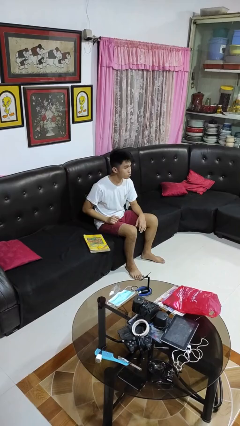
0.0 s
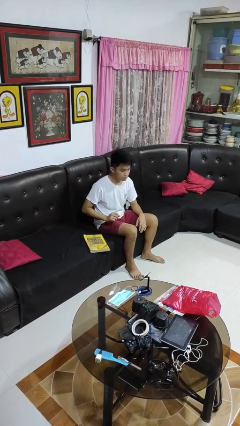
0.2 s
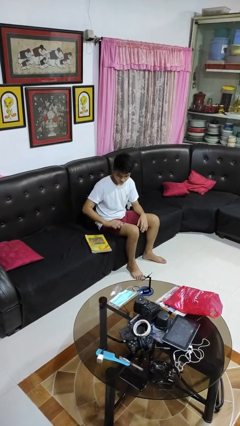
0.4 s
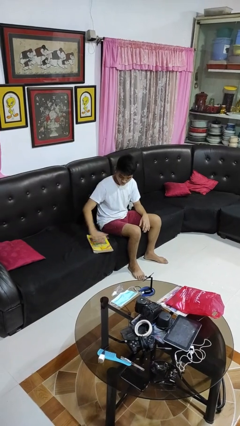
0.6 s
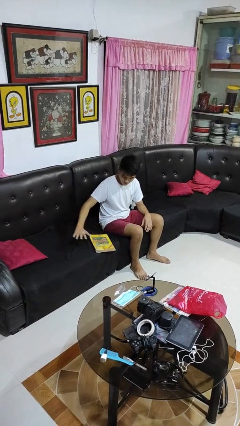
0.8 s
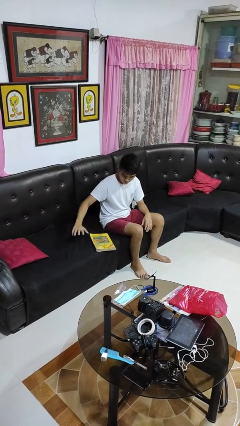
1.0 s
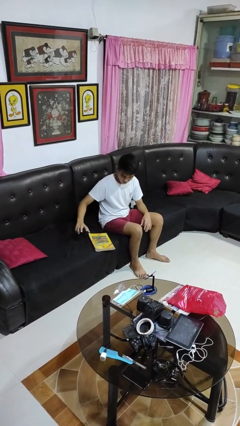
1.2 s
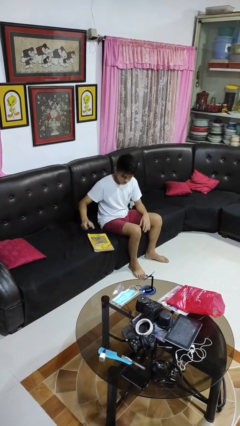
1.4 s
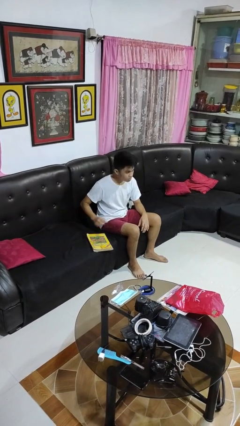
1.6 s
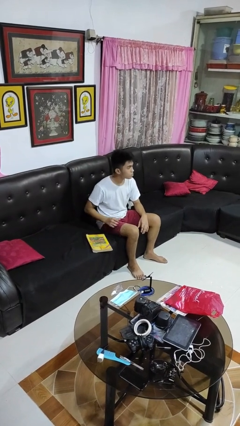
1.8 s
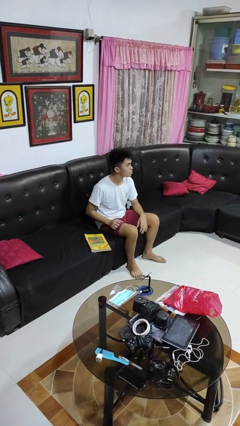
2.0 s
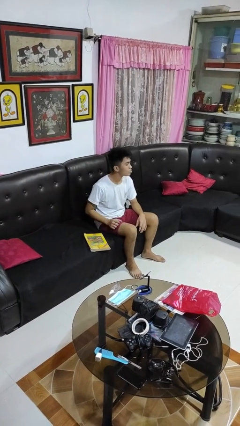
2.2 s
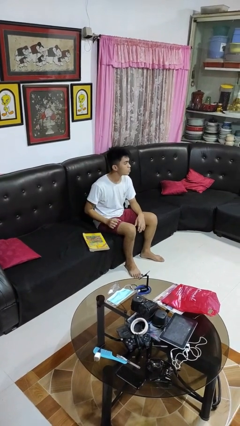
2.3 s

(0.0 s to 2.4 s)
person waves hand over object

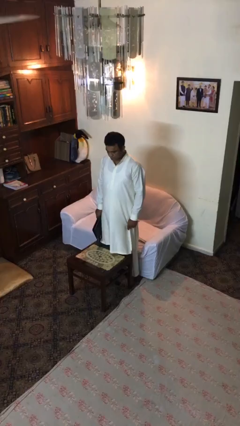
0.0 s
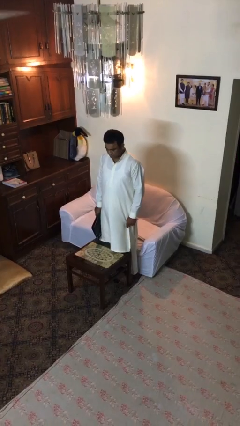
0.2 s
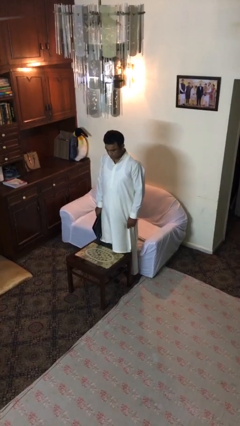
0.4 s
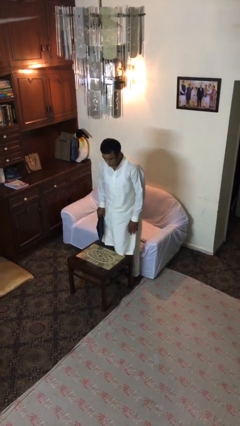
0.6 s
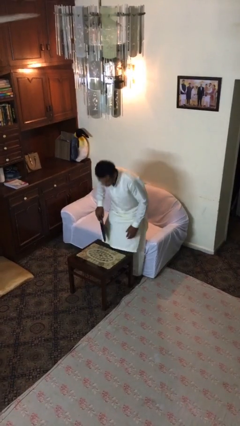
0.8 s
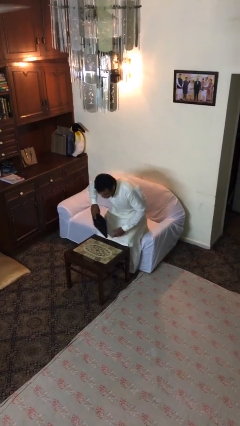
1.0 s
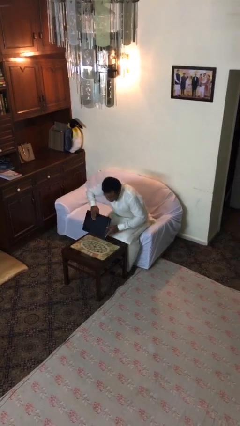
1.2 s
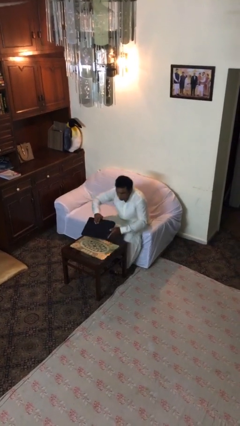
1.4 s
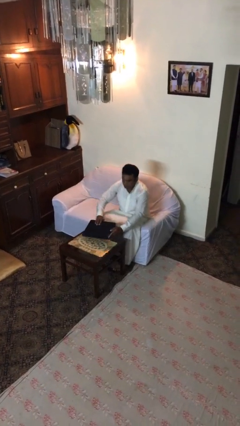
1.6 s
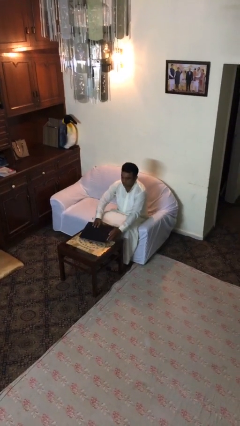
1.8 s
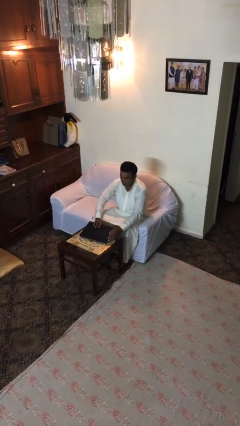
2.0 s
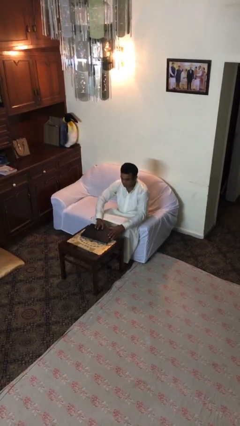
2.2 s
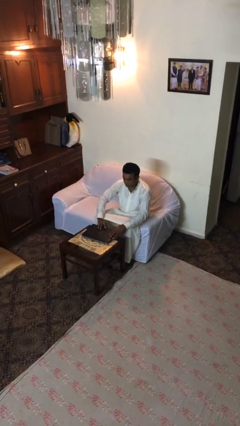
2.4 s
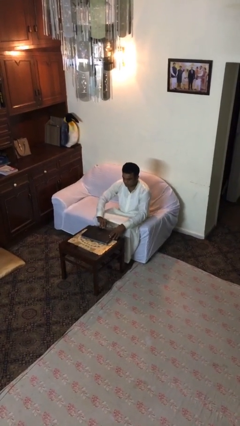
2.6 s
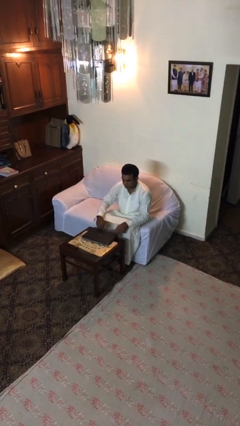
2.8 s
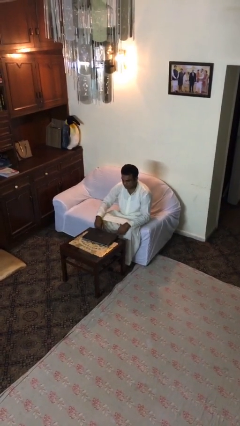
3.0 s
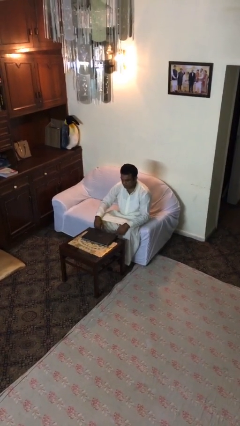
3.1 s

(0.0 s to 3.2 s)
person sits down

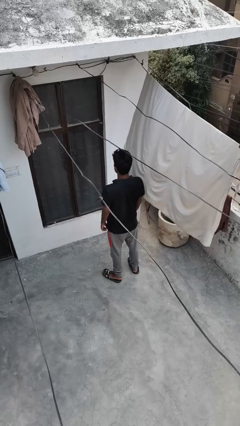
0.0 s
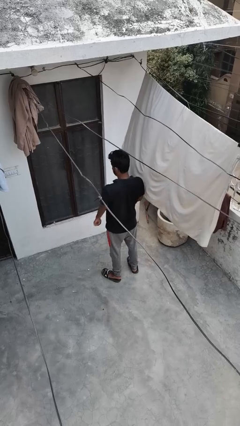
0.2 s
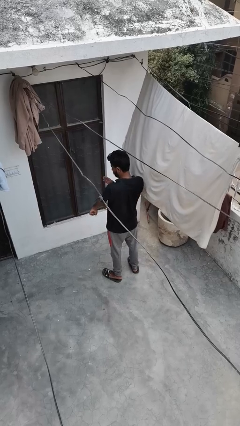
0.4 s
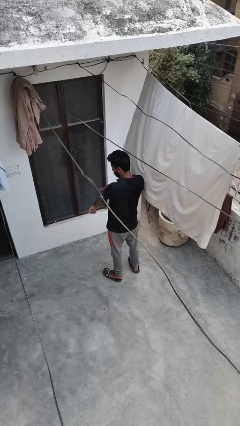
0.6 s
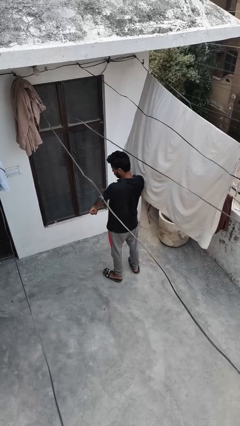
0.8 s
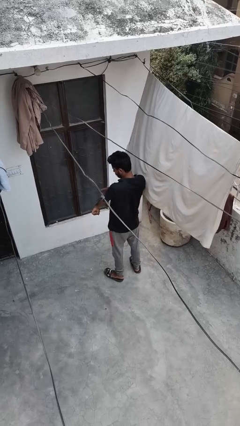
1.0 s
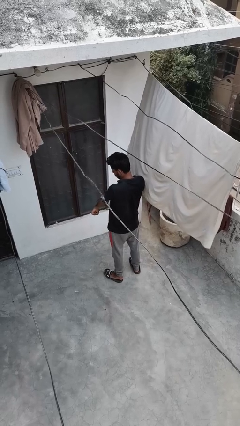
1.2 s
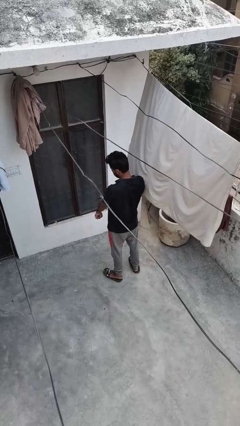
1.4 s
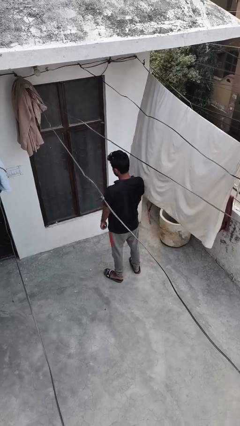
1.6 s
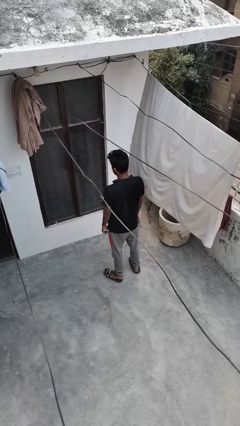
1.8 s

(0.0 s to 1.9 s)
person swats bug

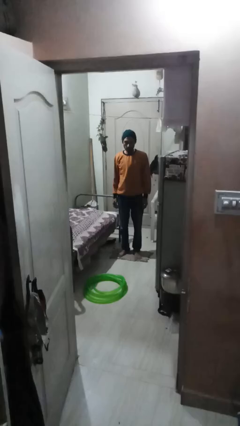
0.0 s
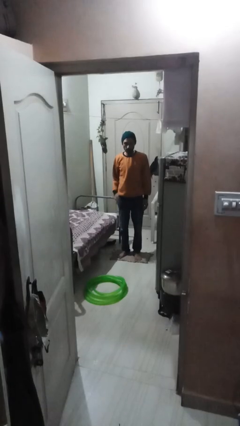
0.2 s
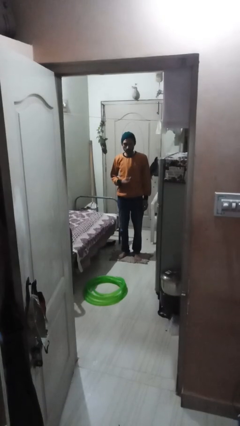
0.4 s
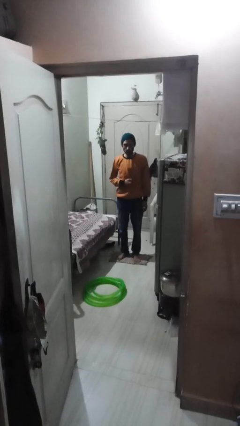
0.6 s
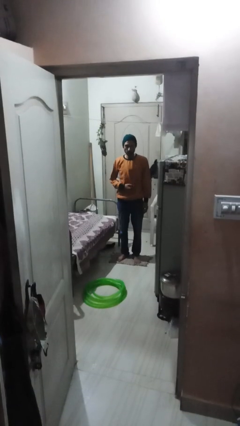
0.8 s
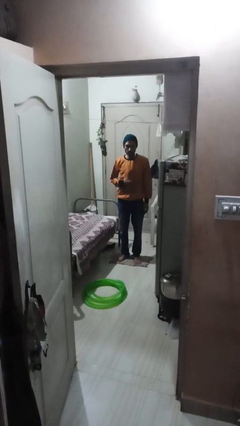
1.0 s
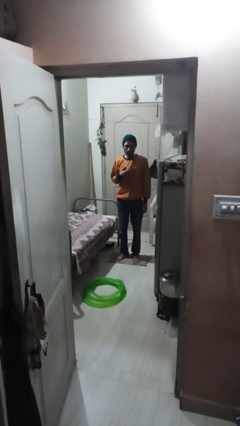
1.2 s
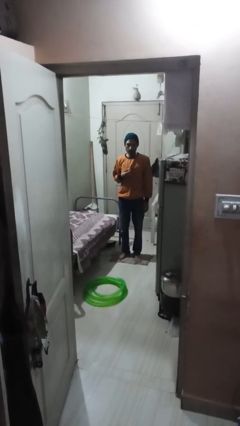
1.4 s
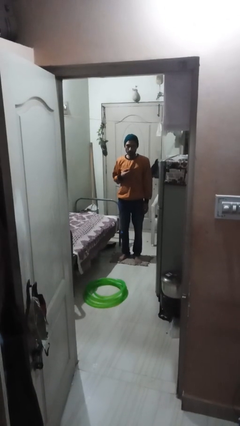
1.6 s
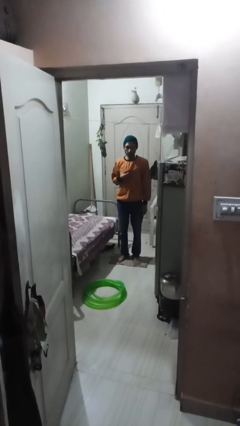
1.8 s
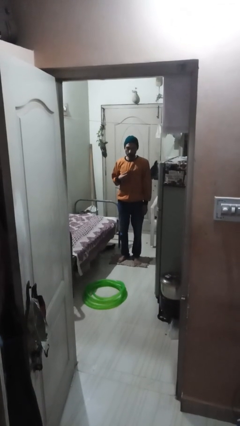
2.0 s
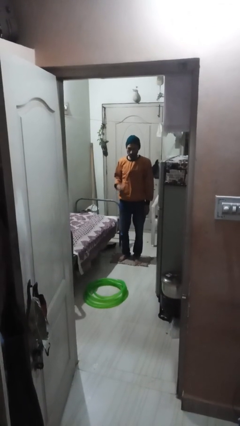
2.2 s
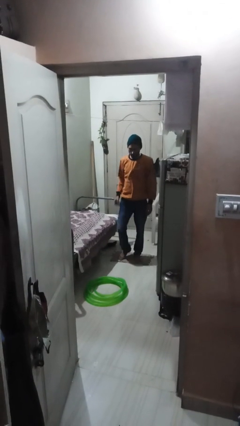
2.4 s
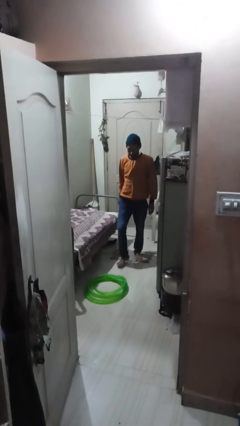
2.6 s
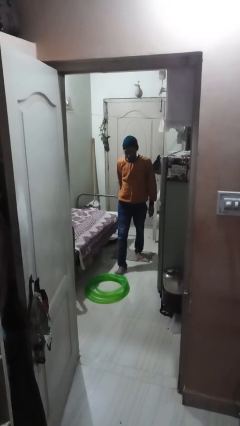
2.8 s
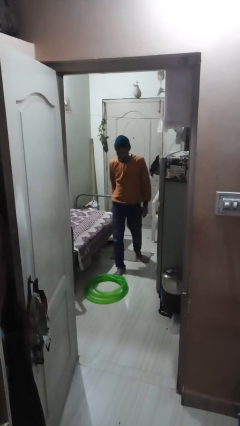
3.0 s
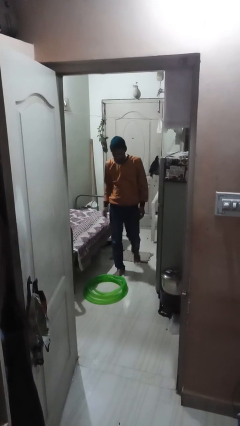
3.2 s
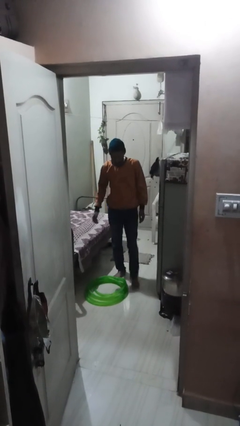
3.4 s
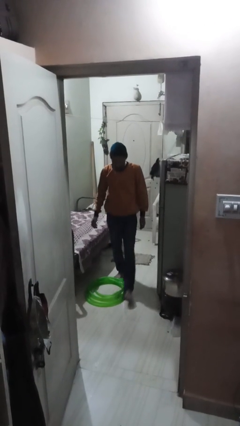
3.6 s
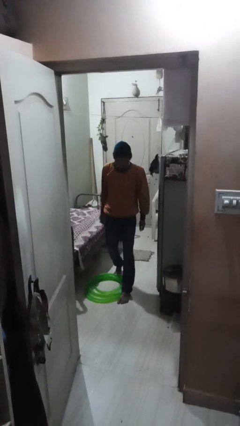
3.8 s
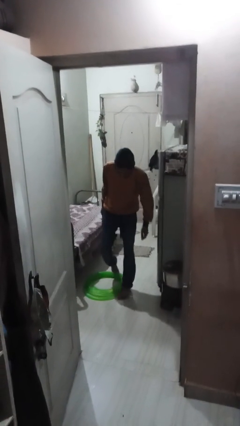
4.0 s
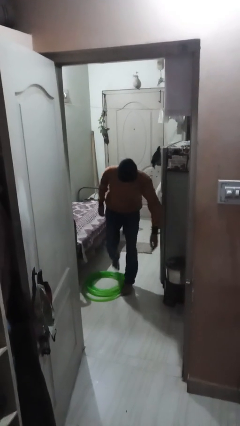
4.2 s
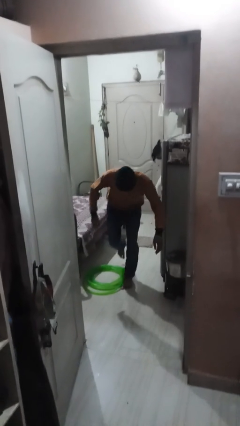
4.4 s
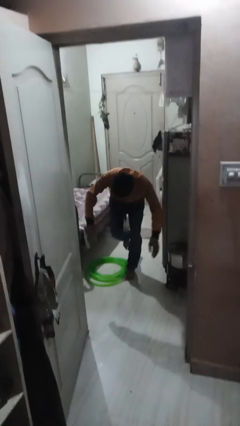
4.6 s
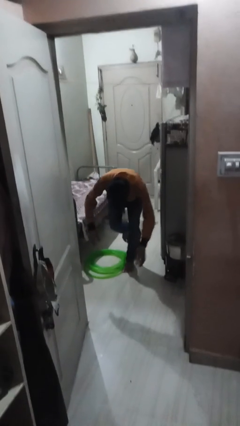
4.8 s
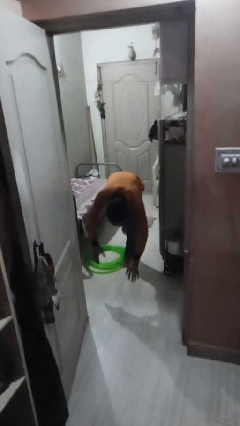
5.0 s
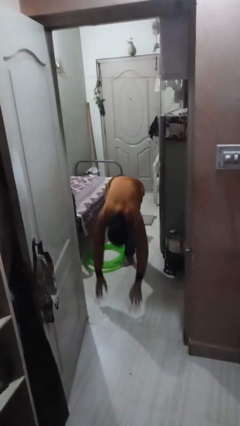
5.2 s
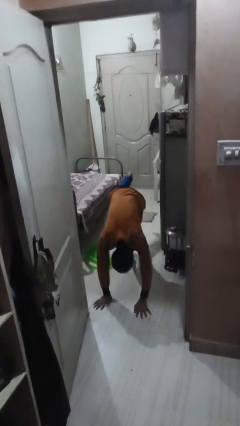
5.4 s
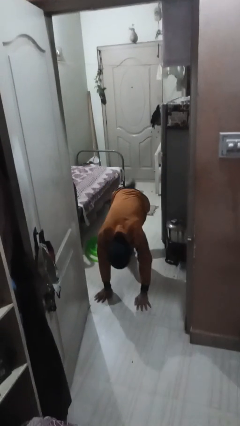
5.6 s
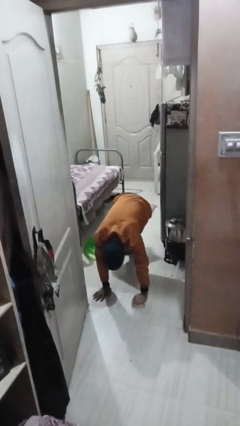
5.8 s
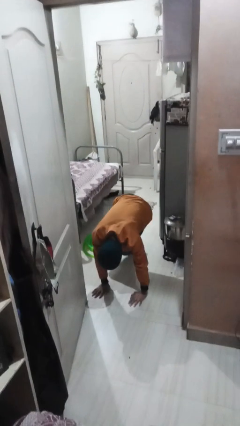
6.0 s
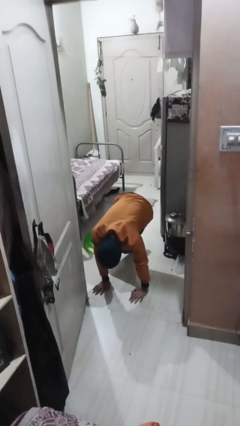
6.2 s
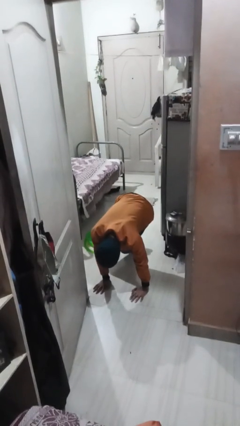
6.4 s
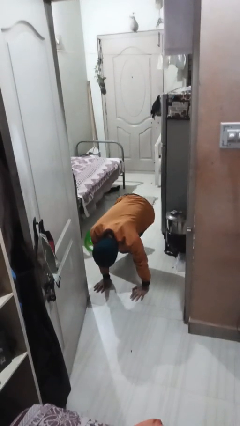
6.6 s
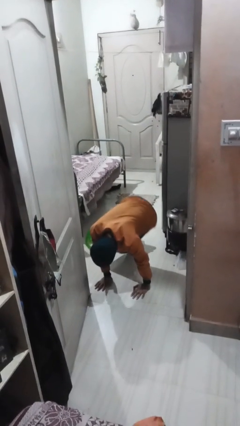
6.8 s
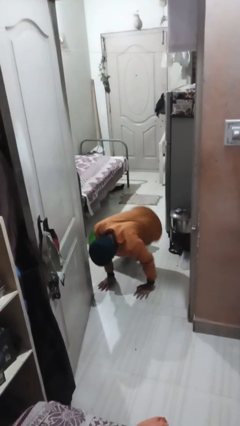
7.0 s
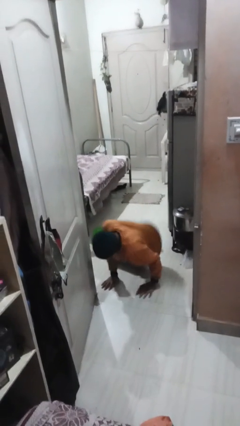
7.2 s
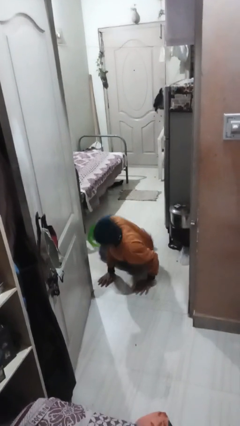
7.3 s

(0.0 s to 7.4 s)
person trips on object on floor

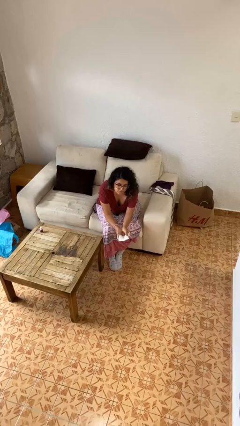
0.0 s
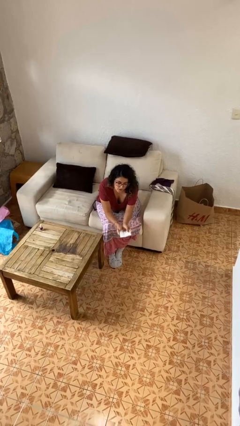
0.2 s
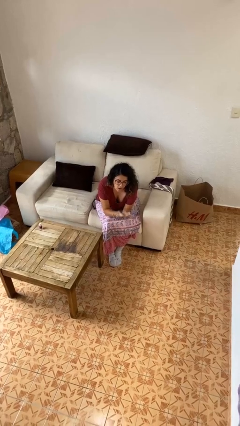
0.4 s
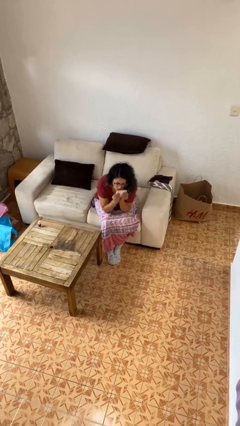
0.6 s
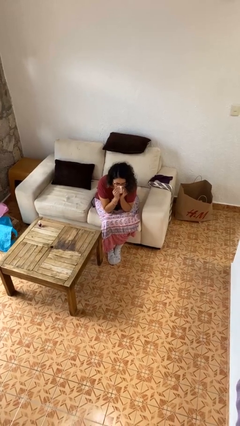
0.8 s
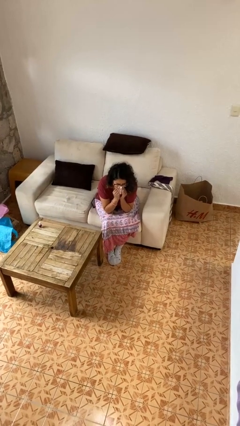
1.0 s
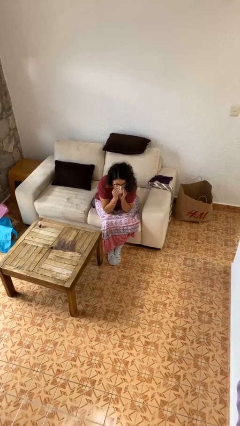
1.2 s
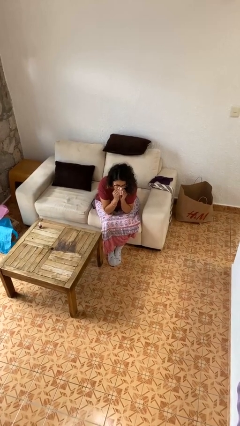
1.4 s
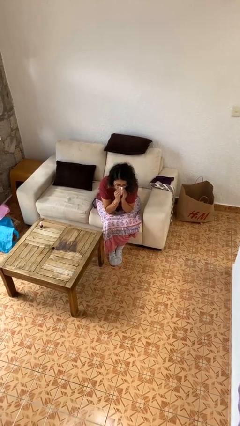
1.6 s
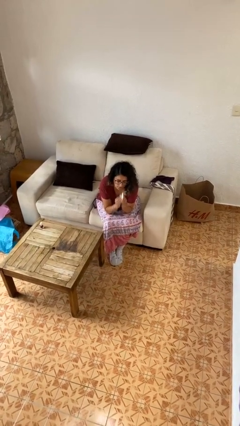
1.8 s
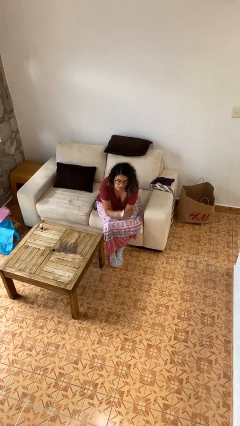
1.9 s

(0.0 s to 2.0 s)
person blows nose

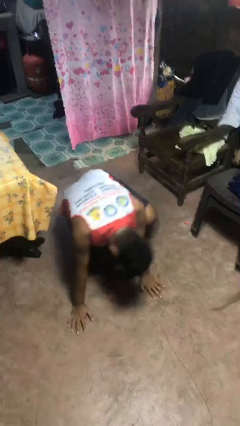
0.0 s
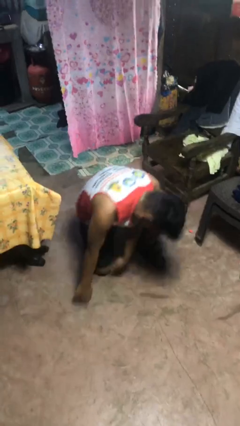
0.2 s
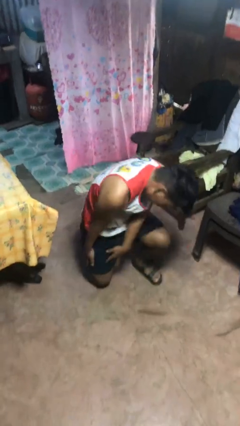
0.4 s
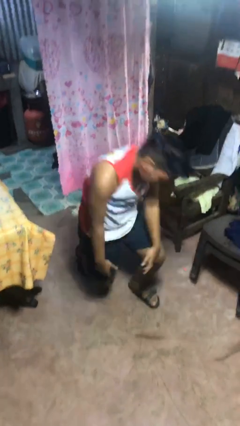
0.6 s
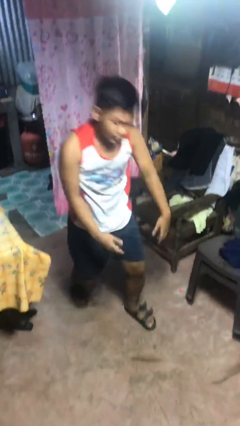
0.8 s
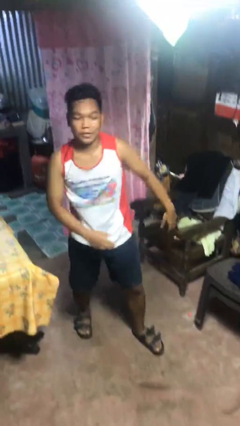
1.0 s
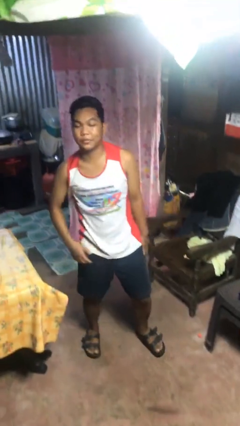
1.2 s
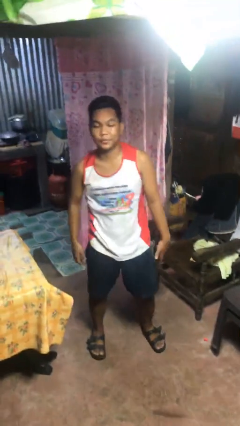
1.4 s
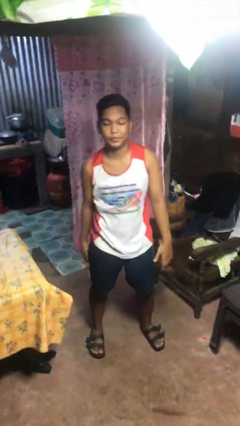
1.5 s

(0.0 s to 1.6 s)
person stands up from floor
